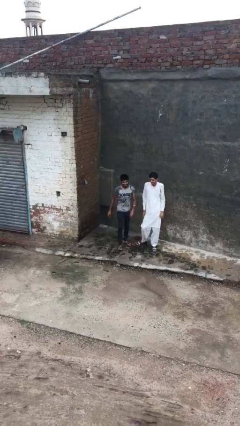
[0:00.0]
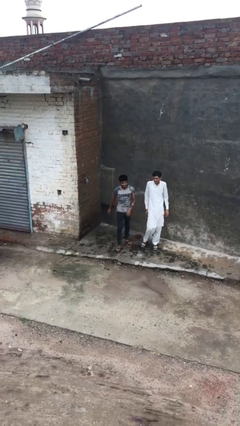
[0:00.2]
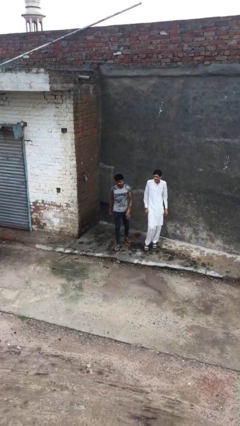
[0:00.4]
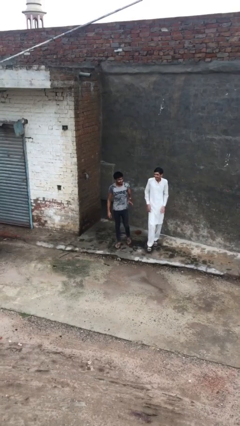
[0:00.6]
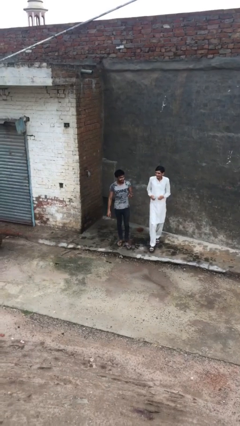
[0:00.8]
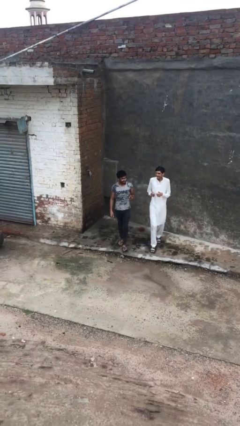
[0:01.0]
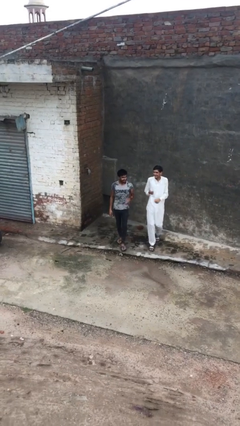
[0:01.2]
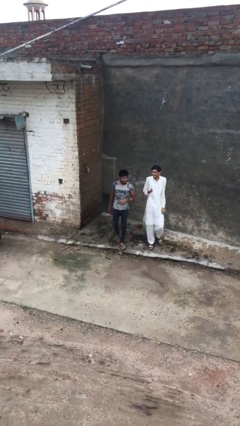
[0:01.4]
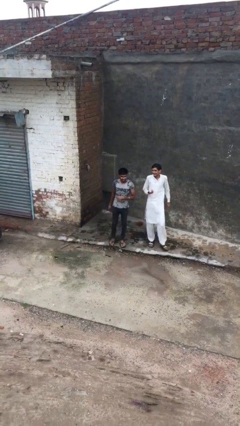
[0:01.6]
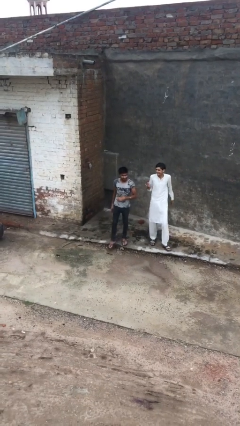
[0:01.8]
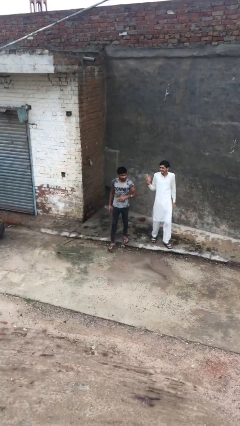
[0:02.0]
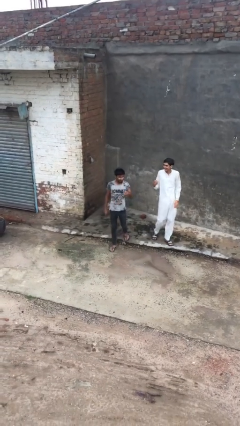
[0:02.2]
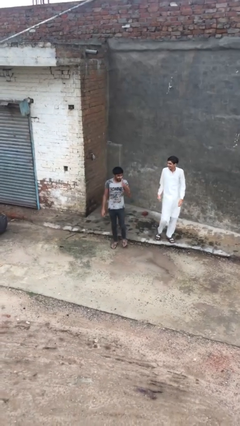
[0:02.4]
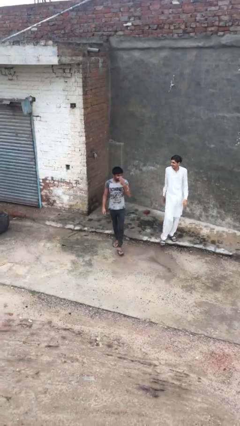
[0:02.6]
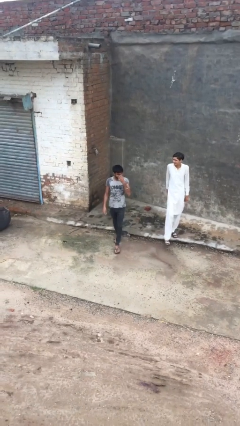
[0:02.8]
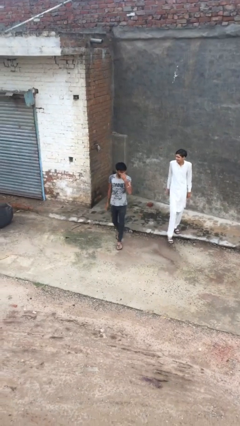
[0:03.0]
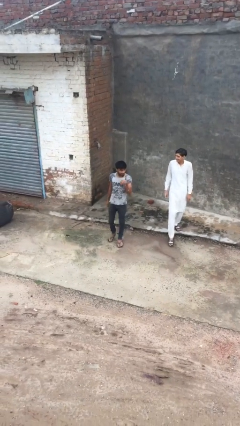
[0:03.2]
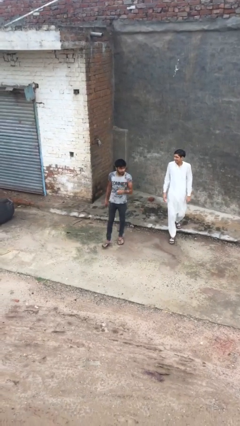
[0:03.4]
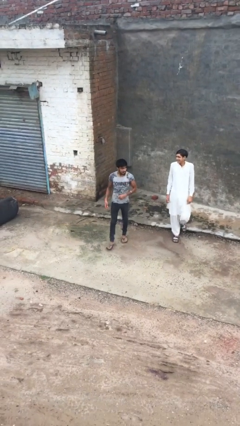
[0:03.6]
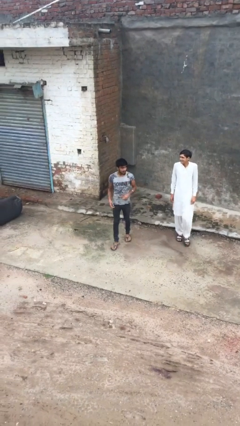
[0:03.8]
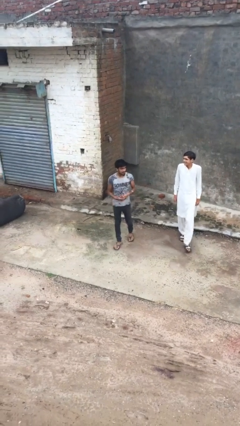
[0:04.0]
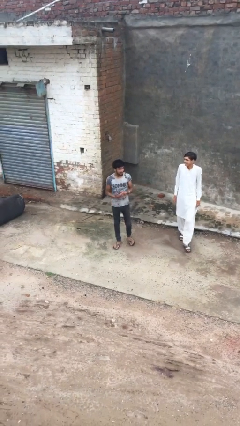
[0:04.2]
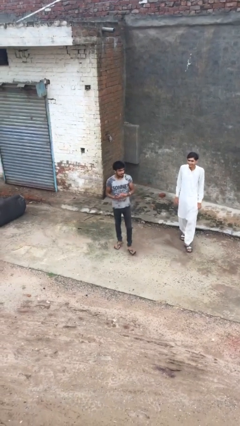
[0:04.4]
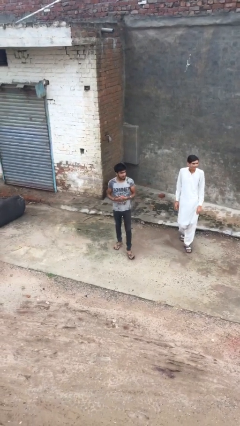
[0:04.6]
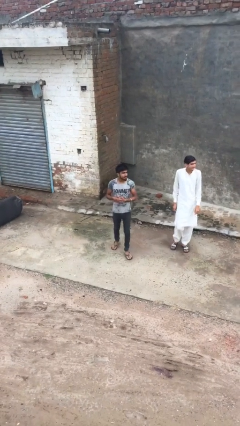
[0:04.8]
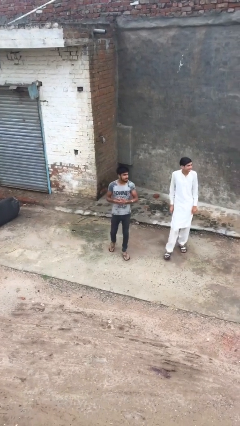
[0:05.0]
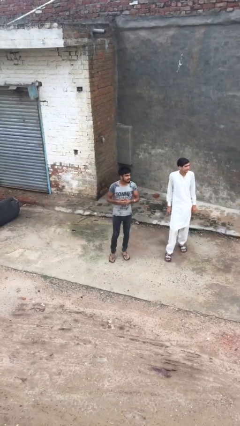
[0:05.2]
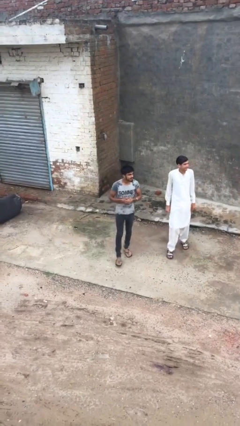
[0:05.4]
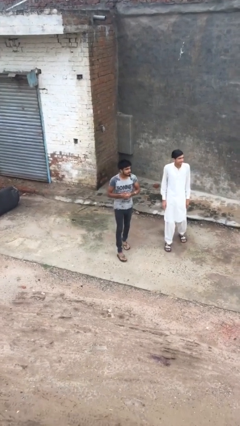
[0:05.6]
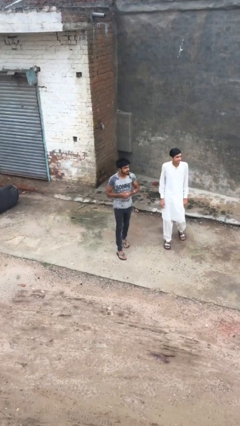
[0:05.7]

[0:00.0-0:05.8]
person talks to person

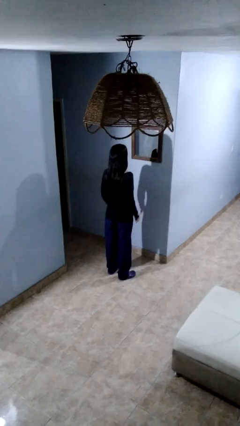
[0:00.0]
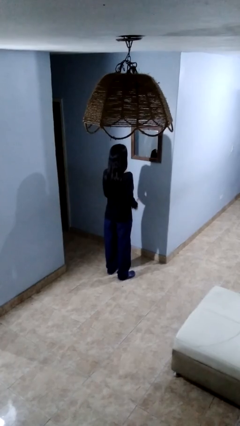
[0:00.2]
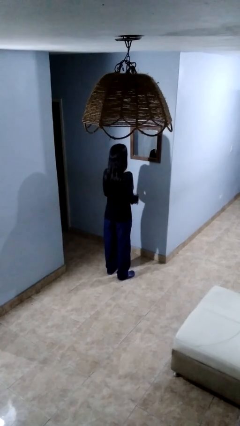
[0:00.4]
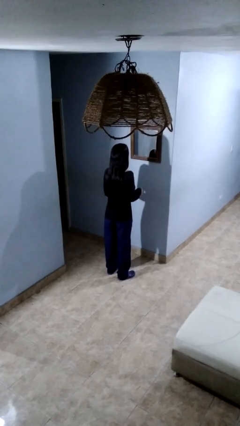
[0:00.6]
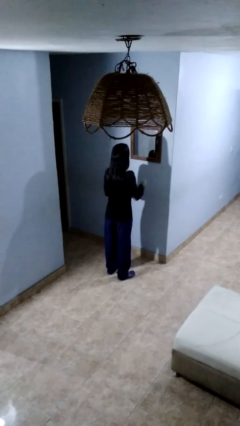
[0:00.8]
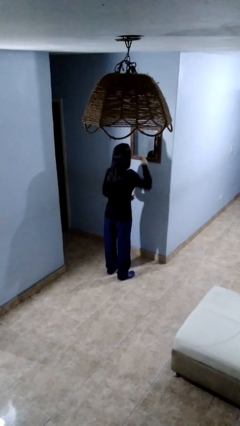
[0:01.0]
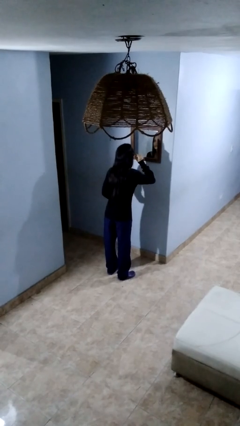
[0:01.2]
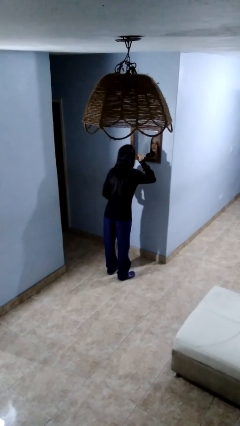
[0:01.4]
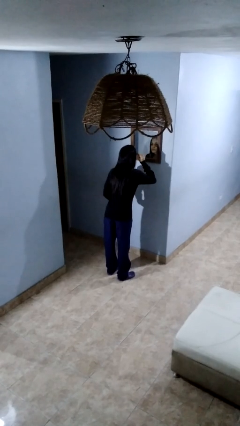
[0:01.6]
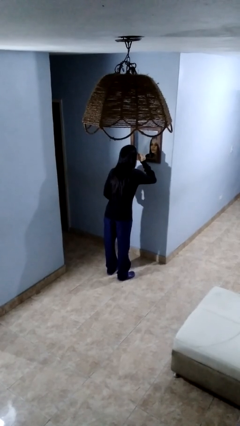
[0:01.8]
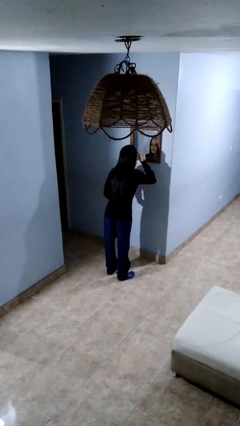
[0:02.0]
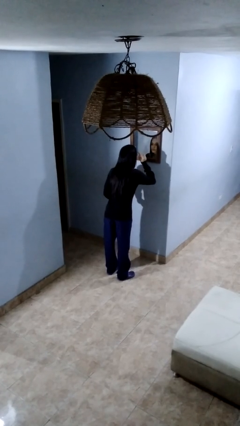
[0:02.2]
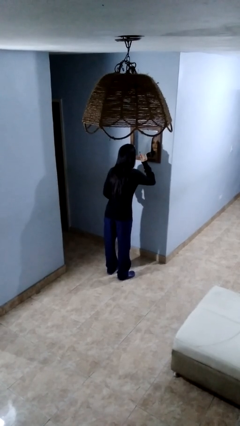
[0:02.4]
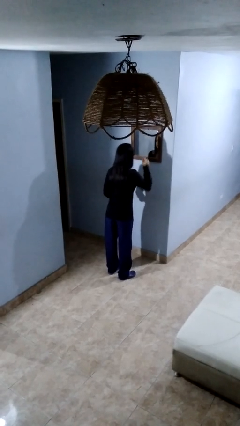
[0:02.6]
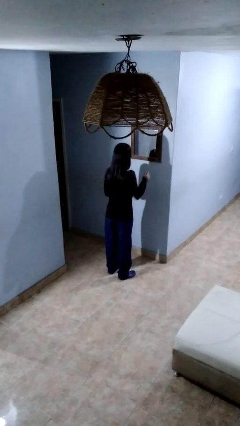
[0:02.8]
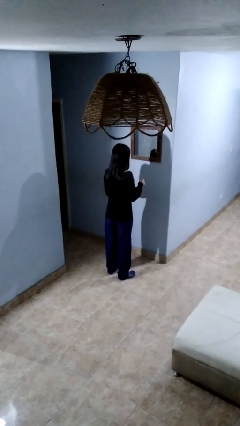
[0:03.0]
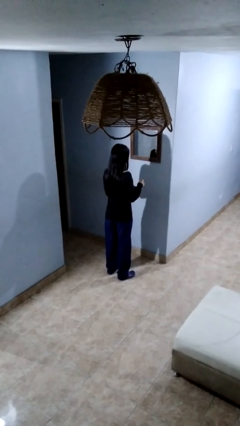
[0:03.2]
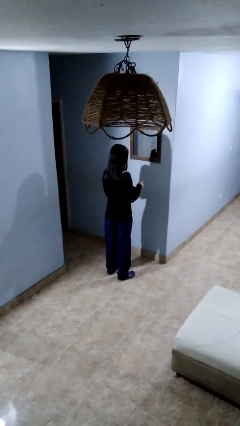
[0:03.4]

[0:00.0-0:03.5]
person applies eye makeup

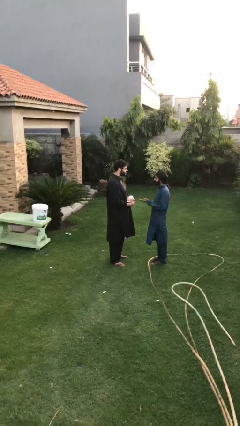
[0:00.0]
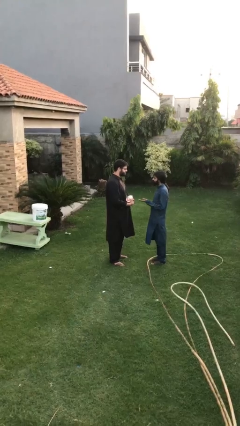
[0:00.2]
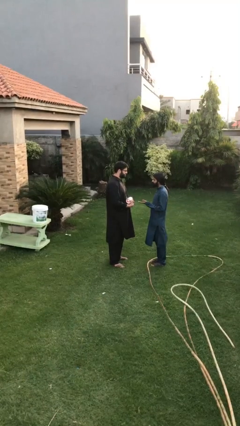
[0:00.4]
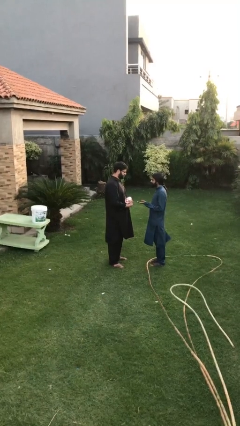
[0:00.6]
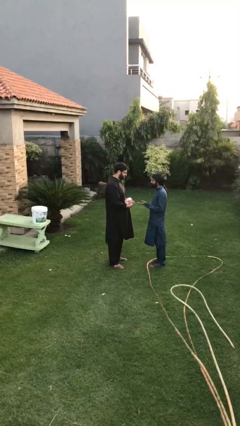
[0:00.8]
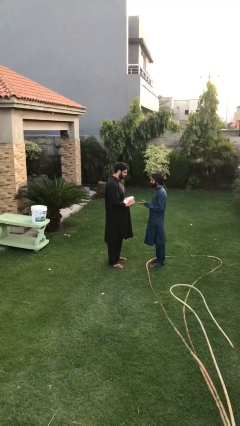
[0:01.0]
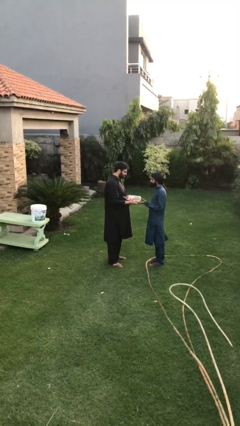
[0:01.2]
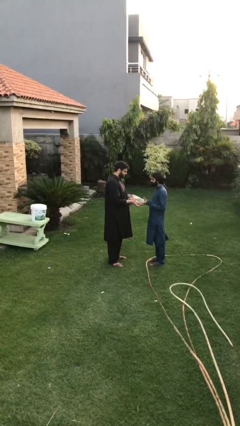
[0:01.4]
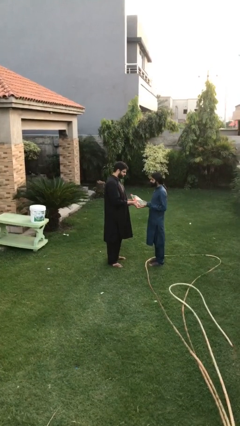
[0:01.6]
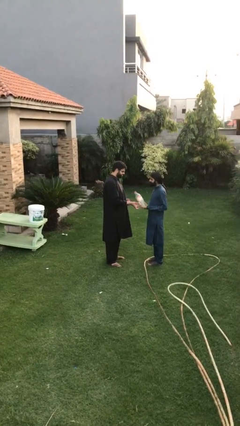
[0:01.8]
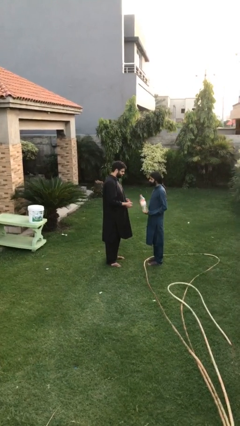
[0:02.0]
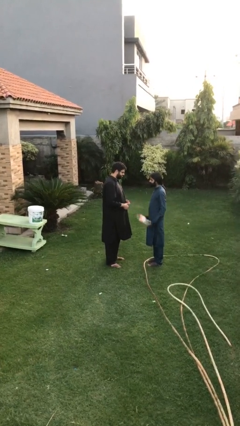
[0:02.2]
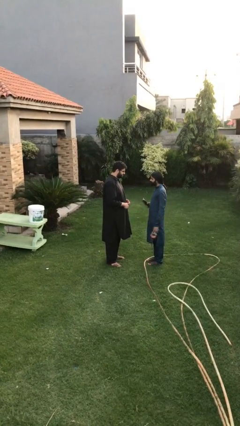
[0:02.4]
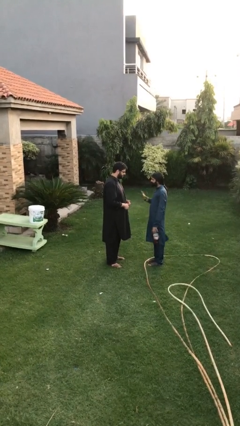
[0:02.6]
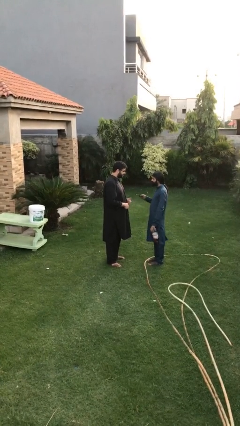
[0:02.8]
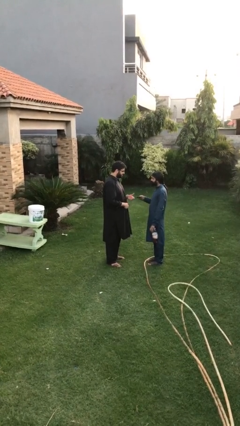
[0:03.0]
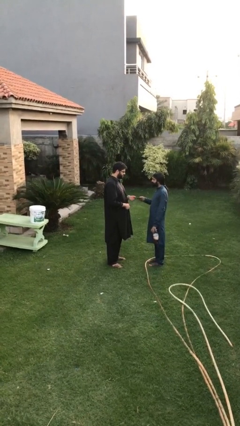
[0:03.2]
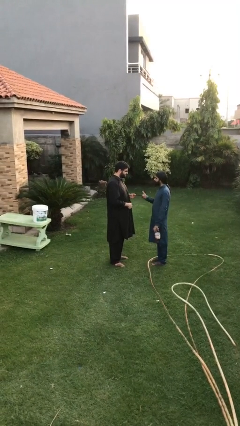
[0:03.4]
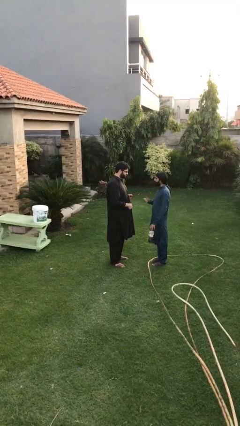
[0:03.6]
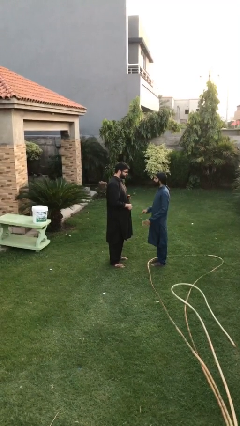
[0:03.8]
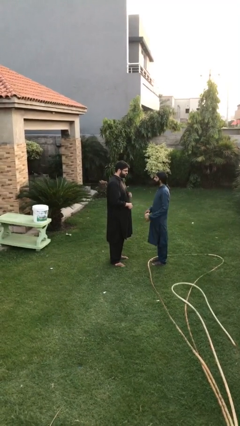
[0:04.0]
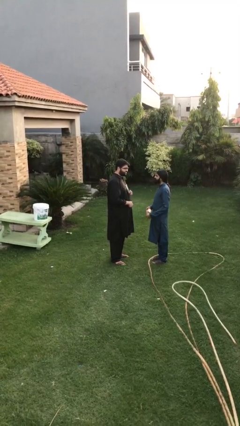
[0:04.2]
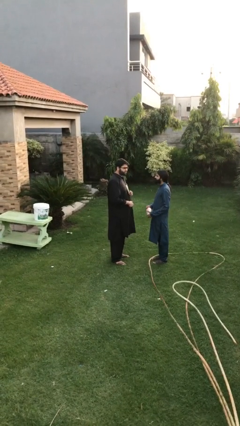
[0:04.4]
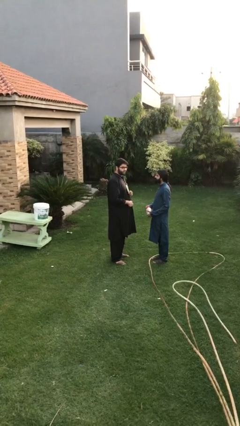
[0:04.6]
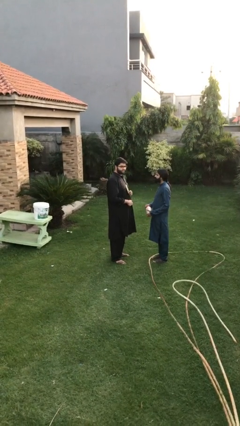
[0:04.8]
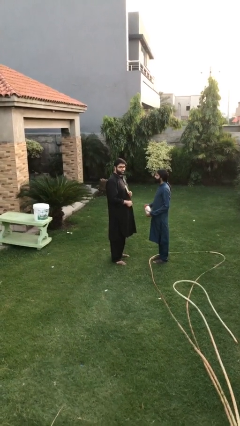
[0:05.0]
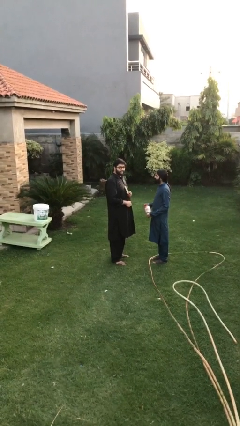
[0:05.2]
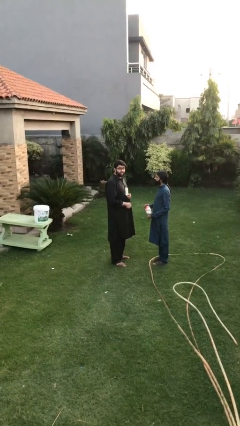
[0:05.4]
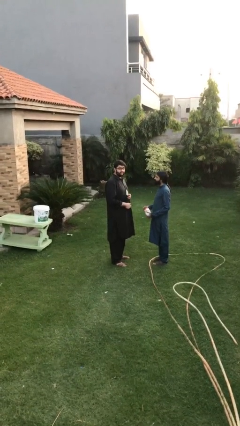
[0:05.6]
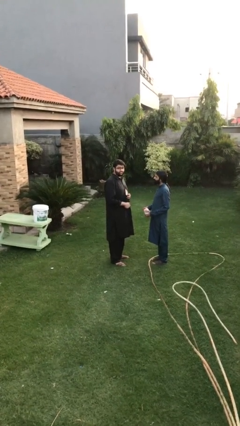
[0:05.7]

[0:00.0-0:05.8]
person transfers object to person

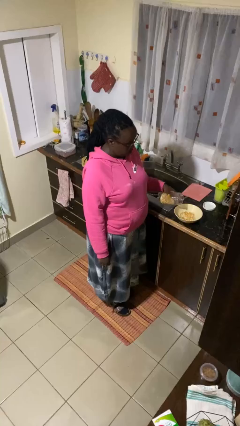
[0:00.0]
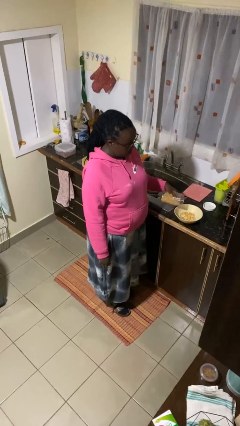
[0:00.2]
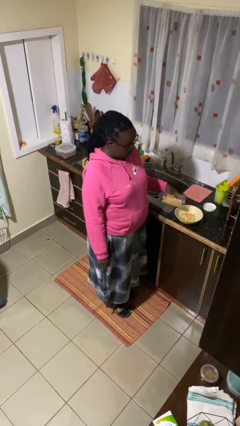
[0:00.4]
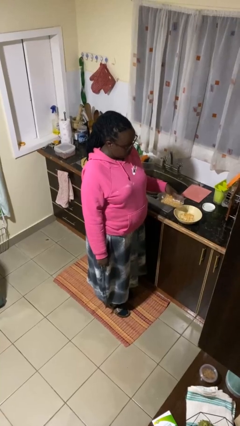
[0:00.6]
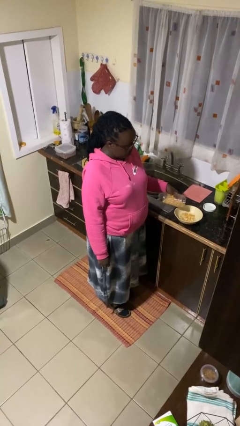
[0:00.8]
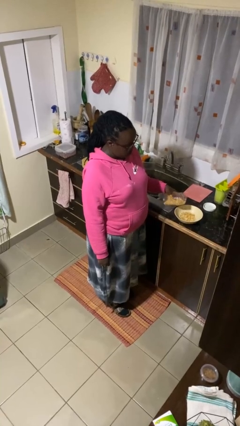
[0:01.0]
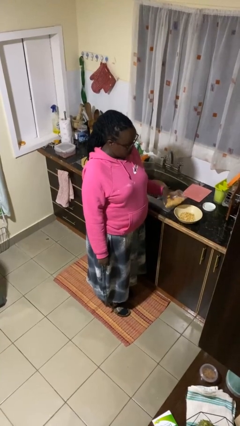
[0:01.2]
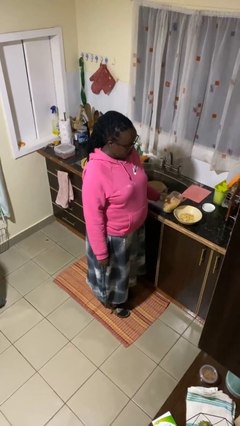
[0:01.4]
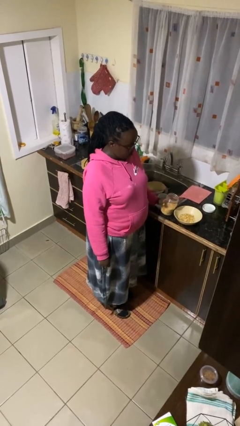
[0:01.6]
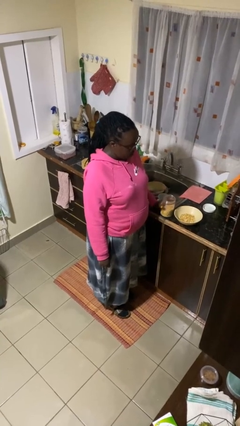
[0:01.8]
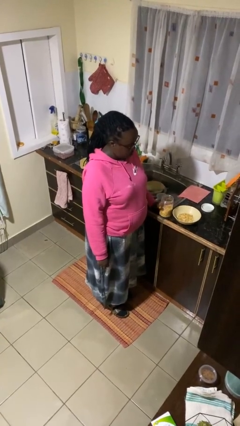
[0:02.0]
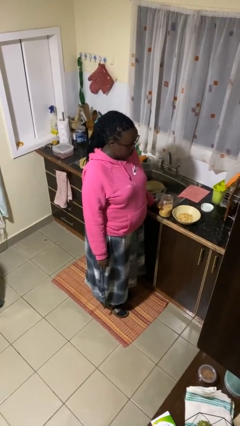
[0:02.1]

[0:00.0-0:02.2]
person pours into bowl

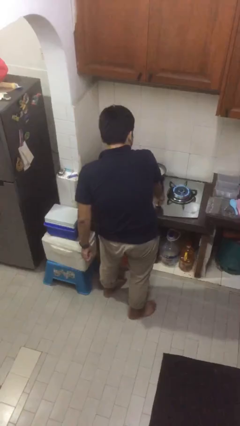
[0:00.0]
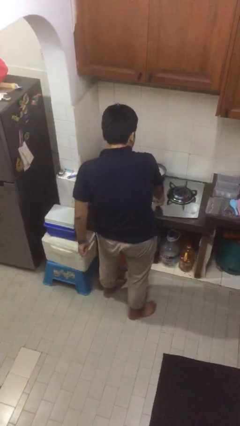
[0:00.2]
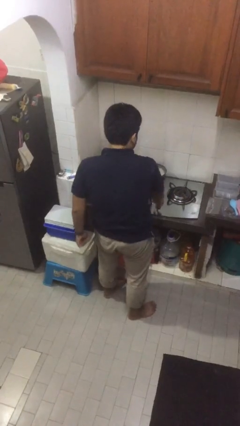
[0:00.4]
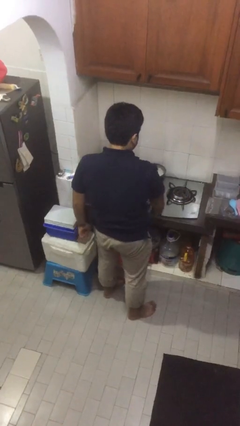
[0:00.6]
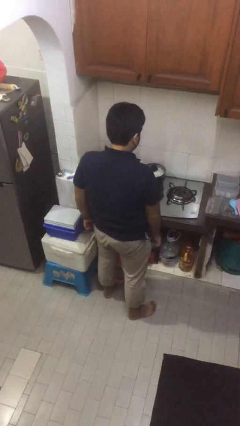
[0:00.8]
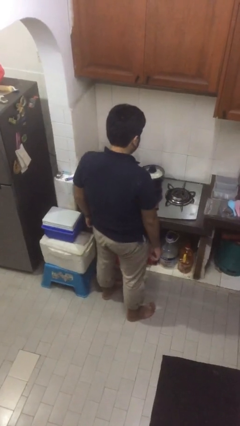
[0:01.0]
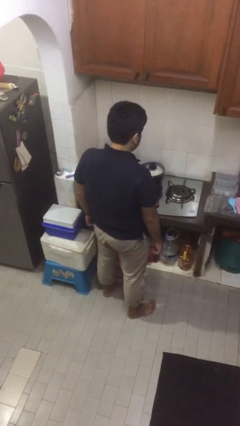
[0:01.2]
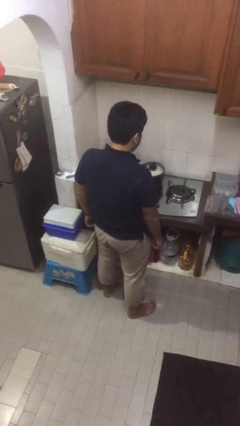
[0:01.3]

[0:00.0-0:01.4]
person turns off stovetop
